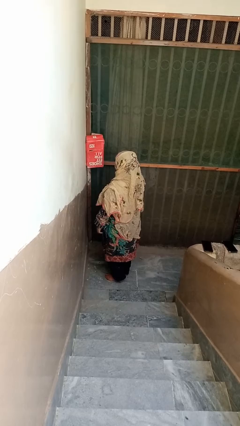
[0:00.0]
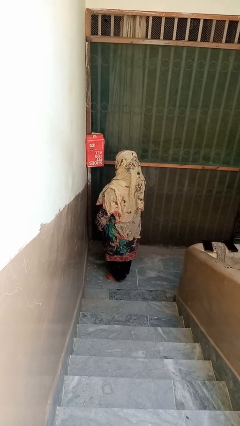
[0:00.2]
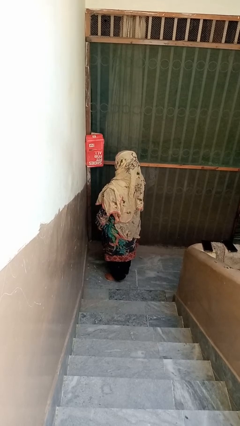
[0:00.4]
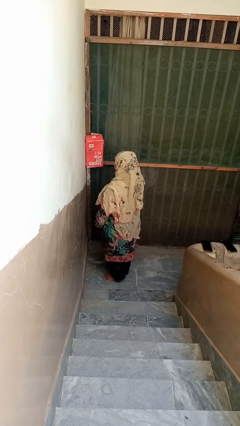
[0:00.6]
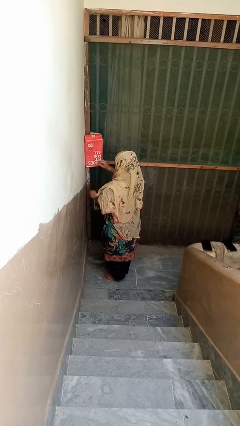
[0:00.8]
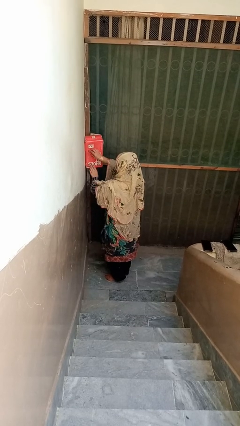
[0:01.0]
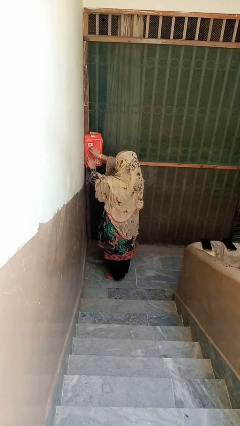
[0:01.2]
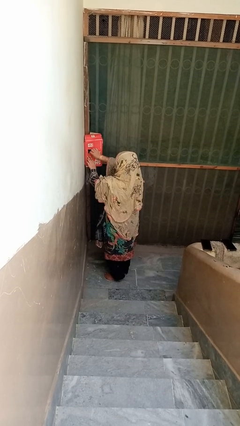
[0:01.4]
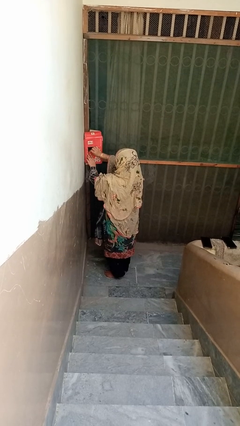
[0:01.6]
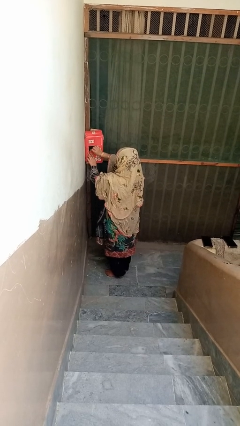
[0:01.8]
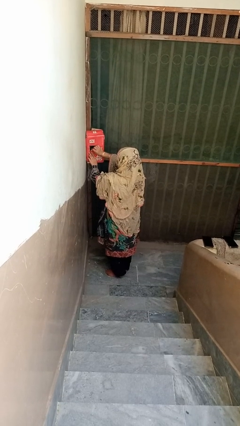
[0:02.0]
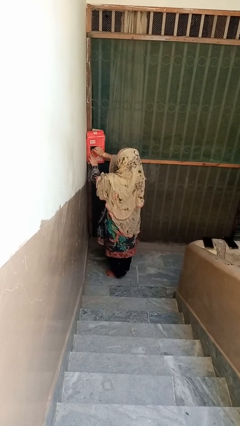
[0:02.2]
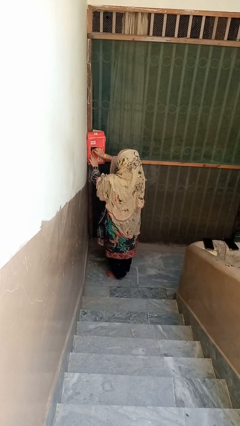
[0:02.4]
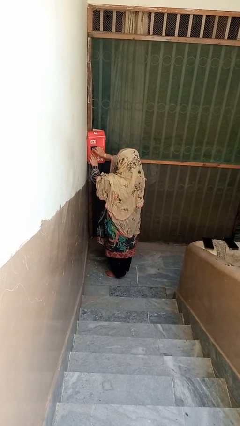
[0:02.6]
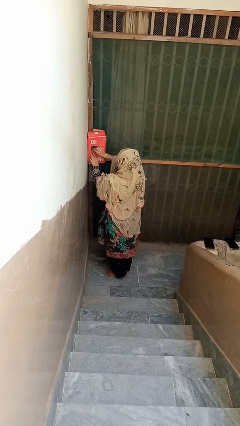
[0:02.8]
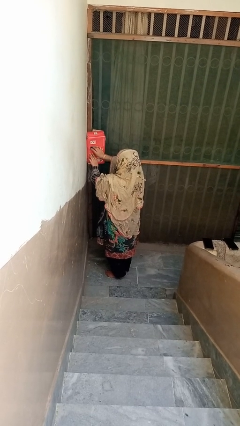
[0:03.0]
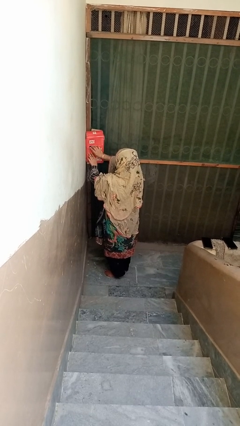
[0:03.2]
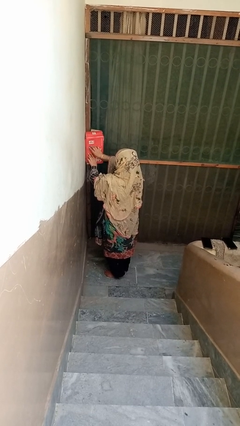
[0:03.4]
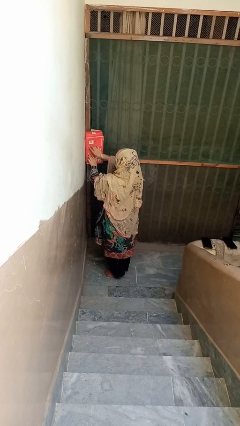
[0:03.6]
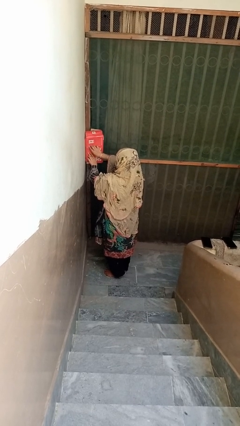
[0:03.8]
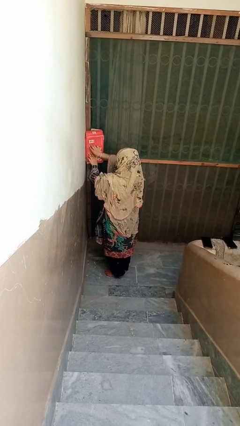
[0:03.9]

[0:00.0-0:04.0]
person opens mailbox

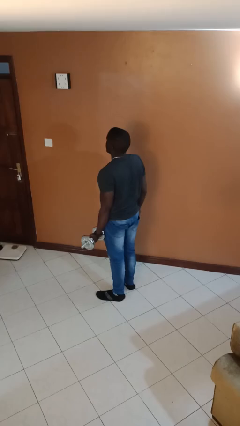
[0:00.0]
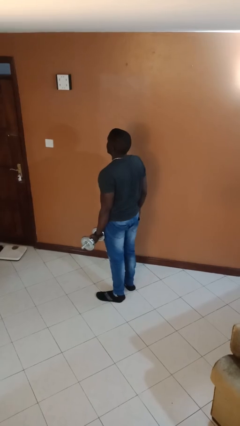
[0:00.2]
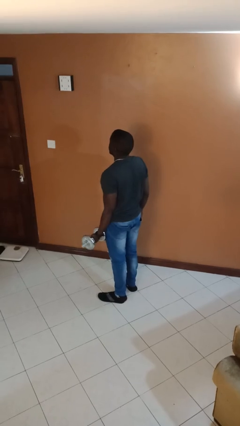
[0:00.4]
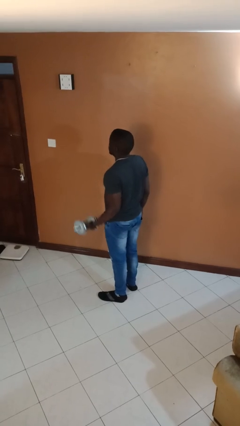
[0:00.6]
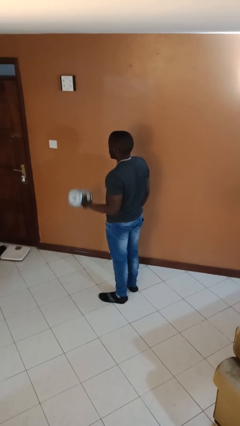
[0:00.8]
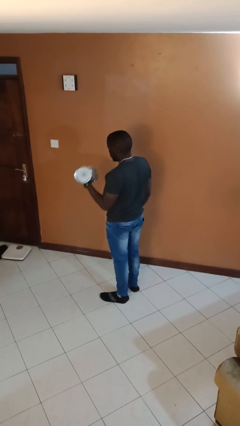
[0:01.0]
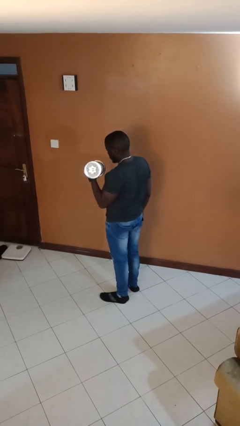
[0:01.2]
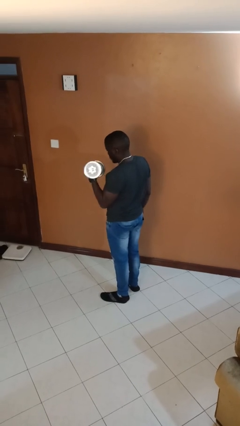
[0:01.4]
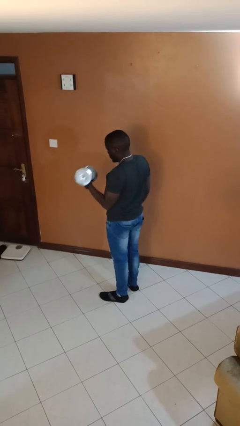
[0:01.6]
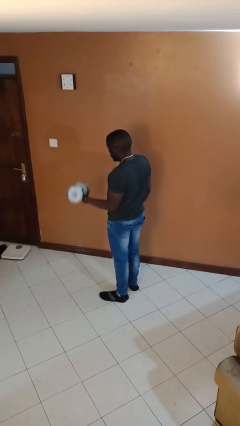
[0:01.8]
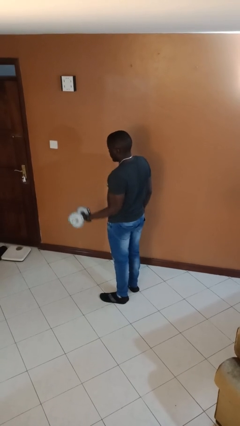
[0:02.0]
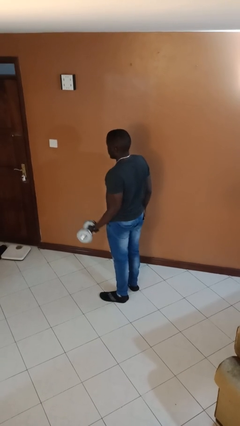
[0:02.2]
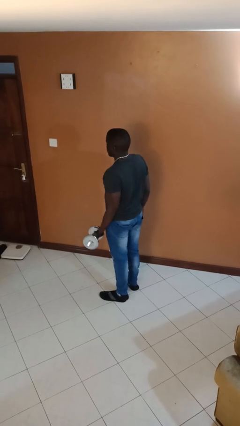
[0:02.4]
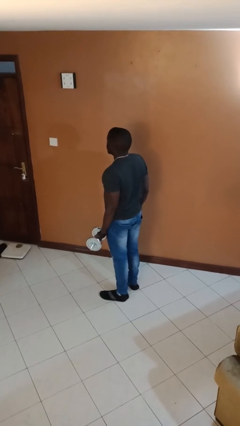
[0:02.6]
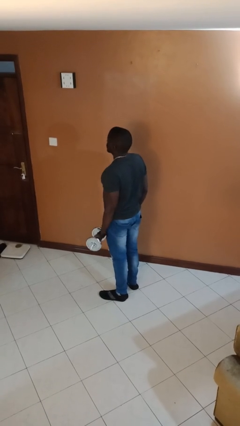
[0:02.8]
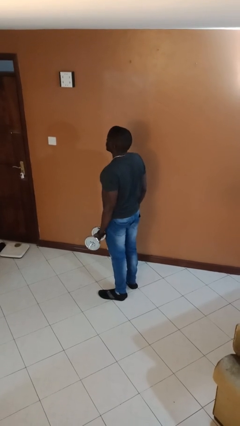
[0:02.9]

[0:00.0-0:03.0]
person lifts dumbbells

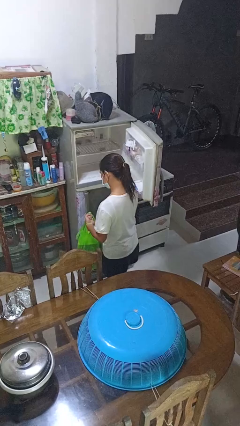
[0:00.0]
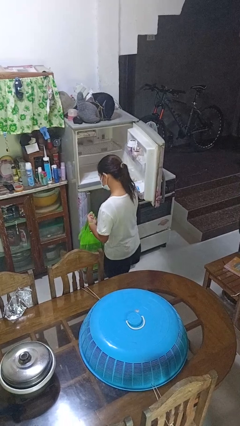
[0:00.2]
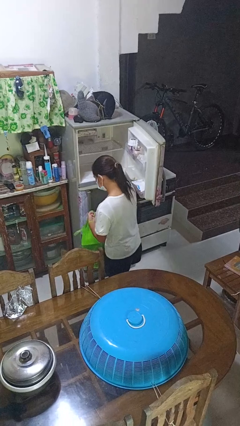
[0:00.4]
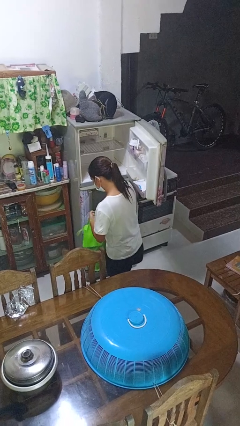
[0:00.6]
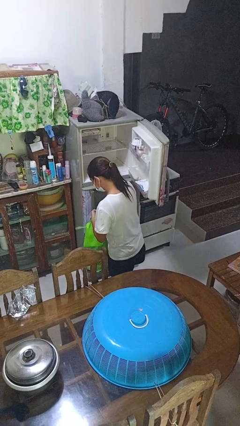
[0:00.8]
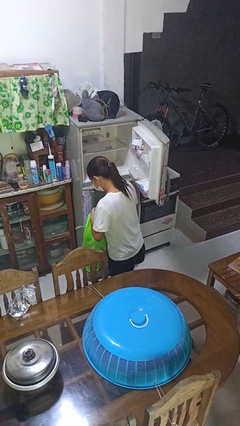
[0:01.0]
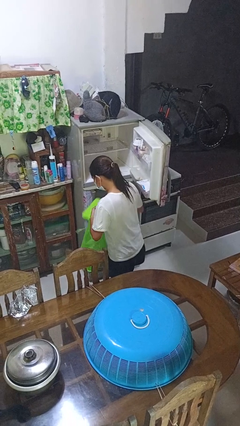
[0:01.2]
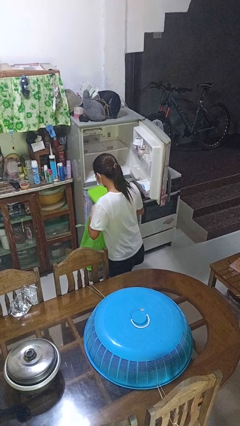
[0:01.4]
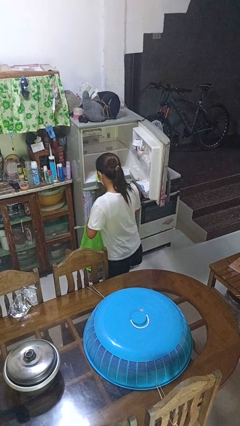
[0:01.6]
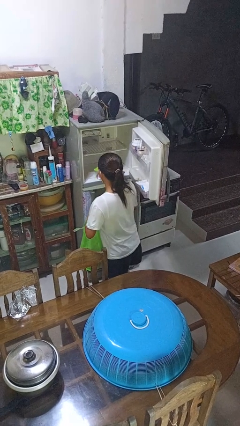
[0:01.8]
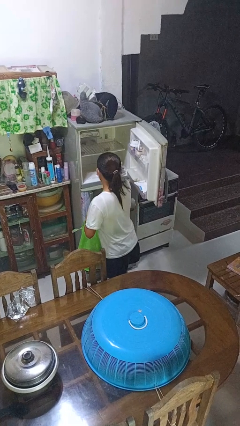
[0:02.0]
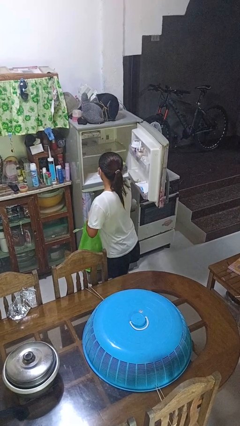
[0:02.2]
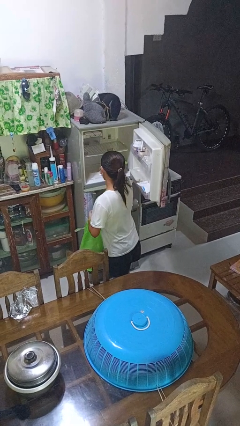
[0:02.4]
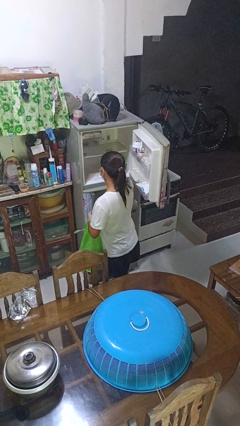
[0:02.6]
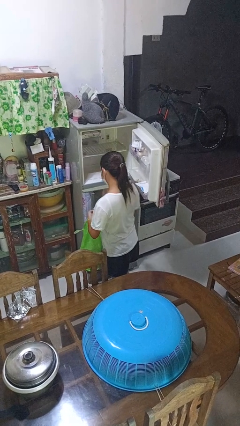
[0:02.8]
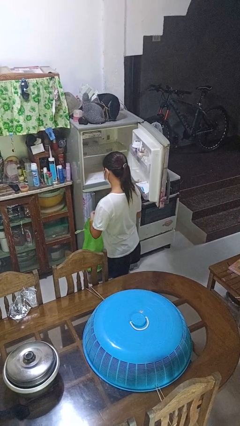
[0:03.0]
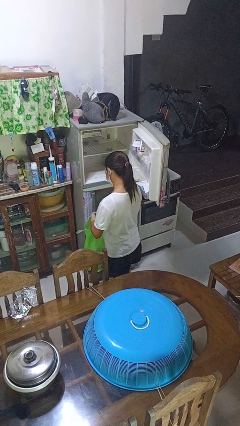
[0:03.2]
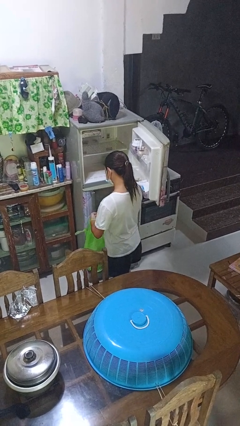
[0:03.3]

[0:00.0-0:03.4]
person loads groceries into refrigerator

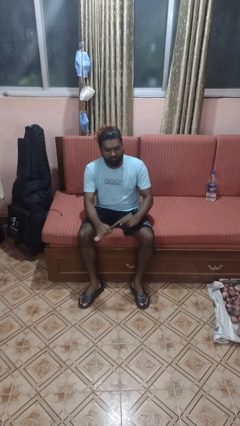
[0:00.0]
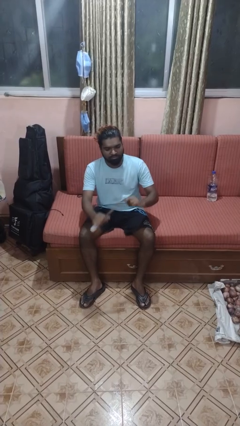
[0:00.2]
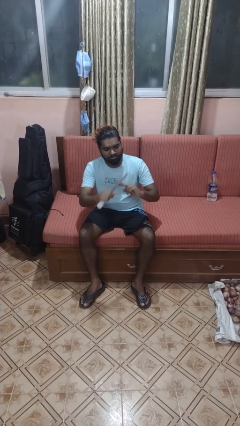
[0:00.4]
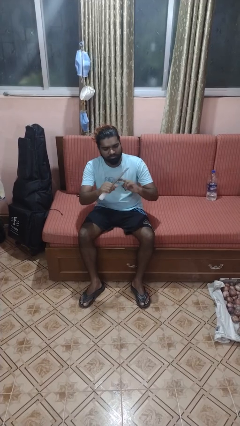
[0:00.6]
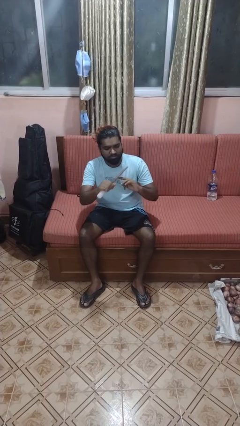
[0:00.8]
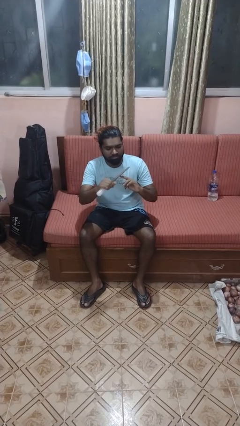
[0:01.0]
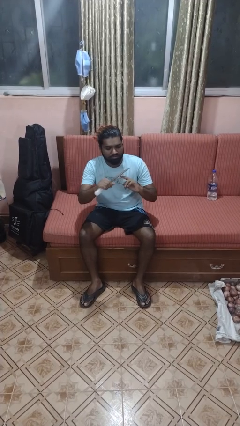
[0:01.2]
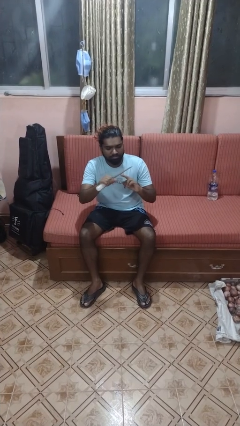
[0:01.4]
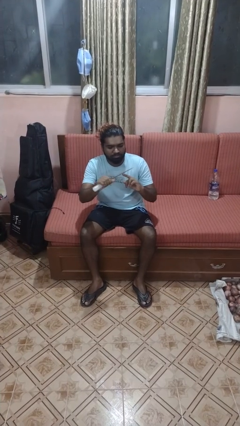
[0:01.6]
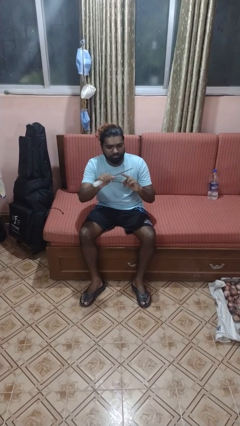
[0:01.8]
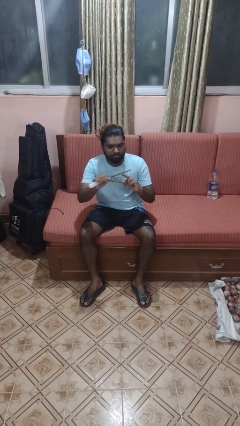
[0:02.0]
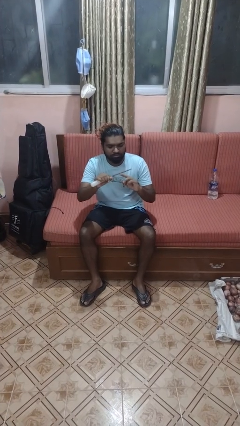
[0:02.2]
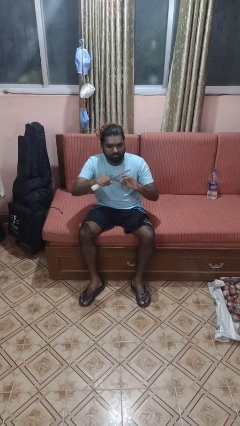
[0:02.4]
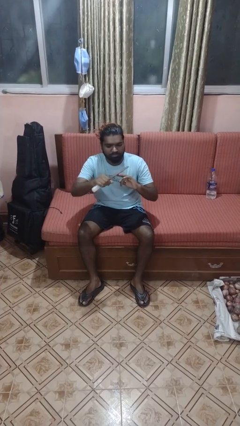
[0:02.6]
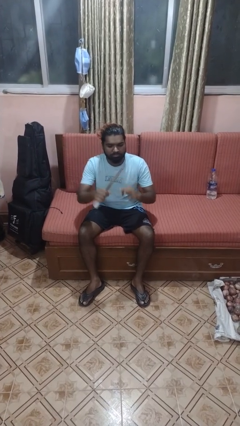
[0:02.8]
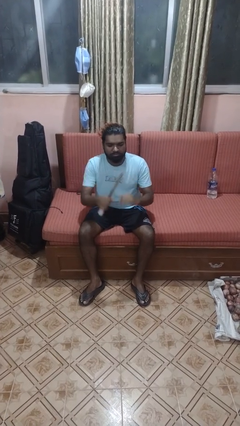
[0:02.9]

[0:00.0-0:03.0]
person files fingernails

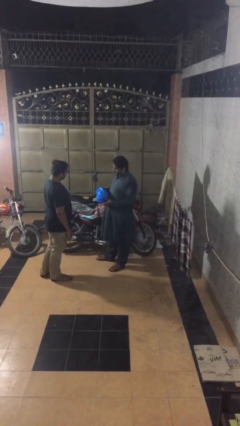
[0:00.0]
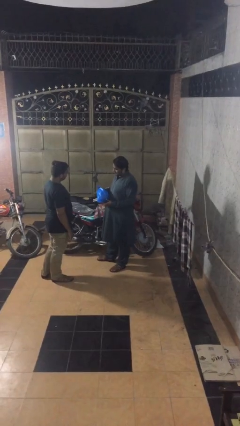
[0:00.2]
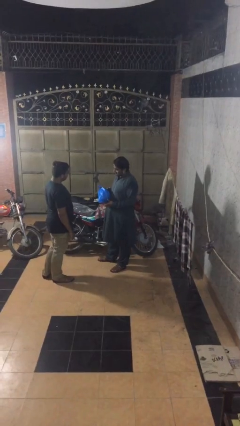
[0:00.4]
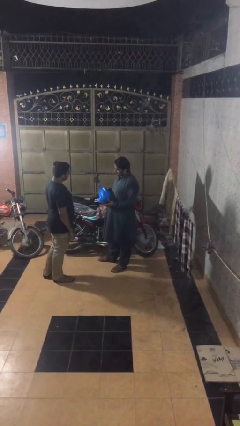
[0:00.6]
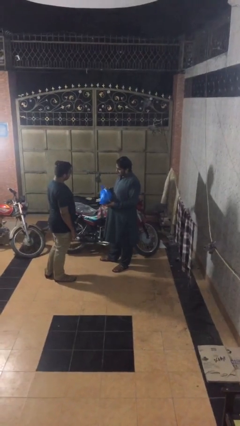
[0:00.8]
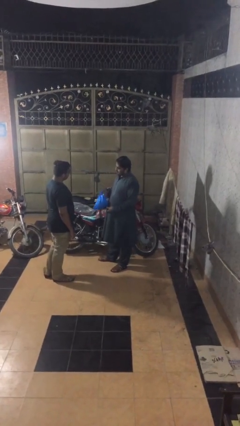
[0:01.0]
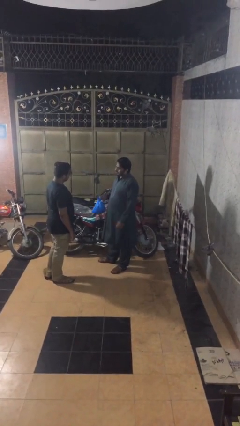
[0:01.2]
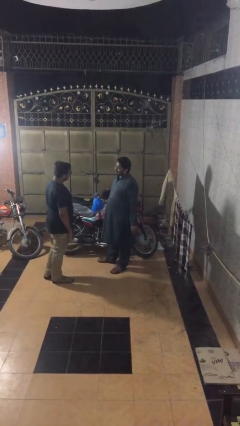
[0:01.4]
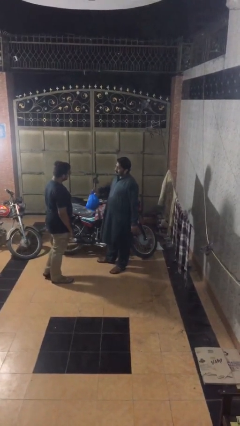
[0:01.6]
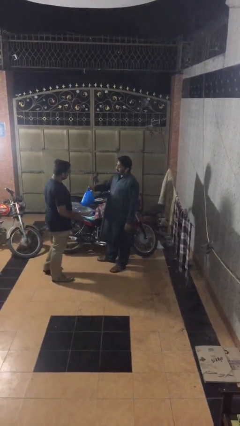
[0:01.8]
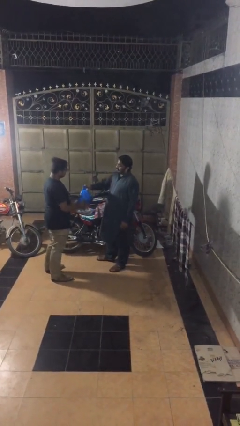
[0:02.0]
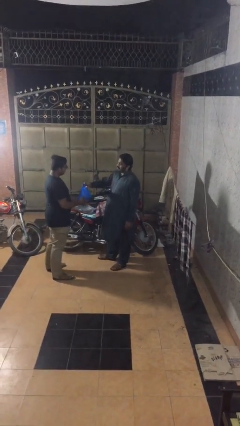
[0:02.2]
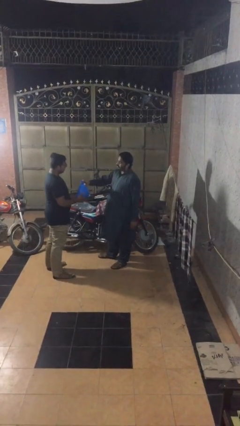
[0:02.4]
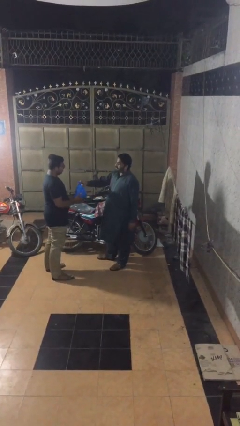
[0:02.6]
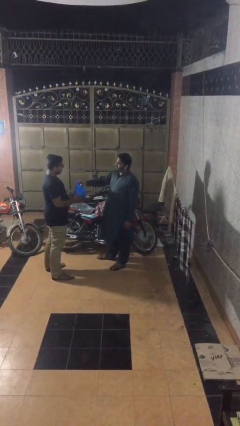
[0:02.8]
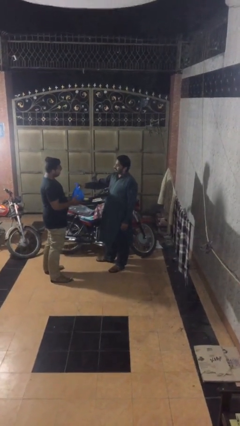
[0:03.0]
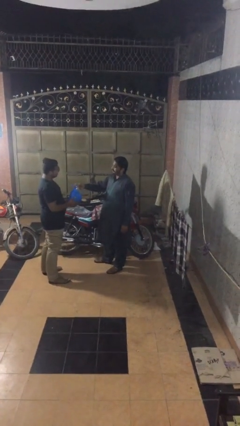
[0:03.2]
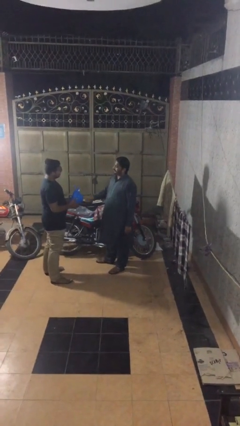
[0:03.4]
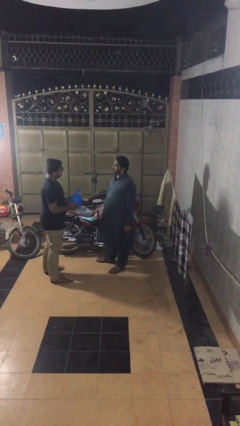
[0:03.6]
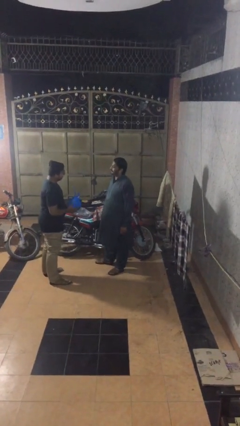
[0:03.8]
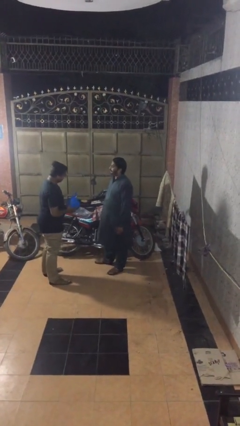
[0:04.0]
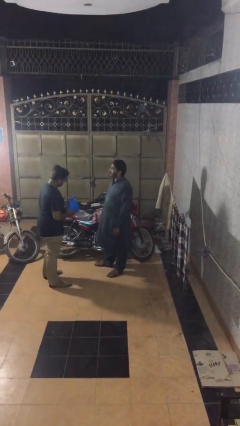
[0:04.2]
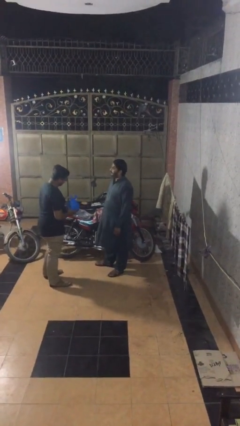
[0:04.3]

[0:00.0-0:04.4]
person transfers object to person
